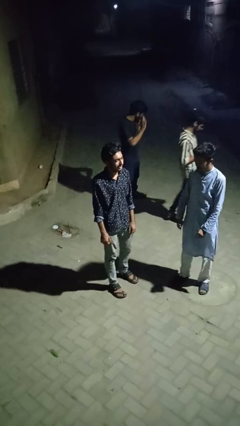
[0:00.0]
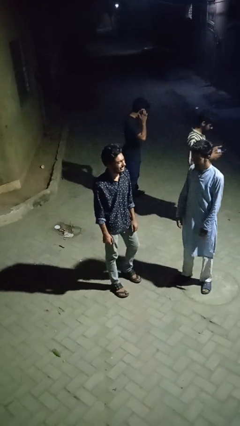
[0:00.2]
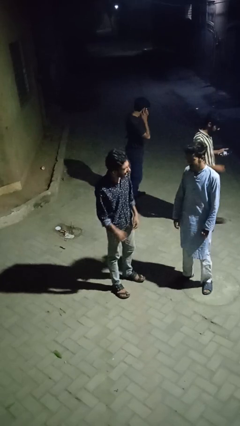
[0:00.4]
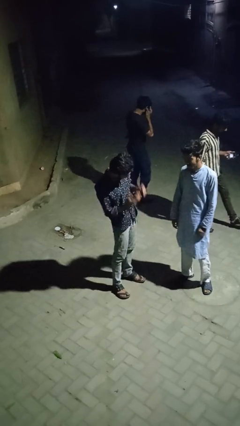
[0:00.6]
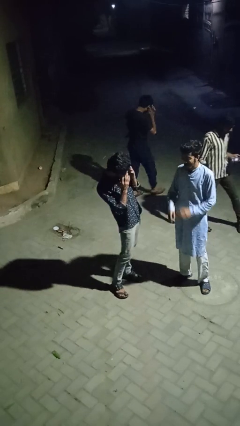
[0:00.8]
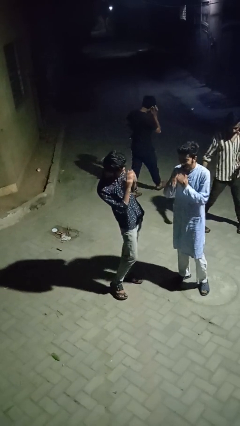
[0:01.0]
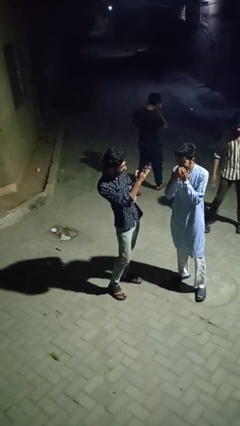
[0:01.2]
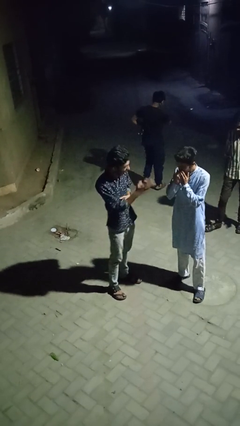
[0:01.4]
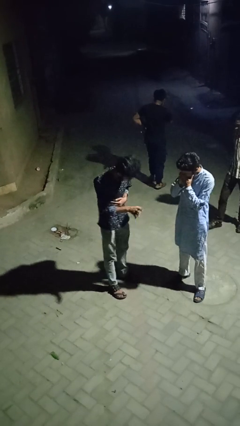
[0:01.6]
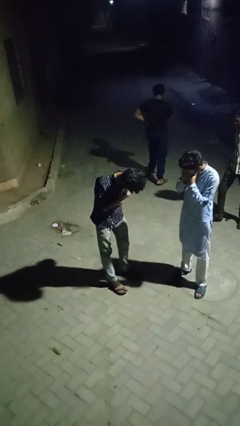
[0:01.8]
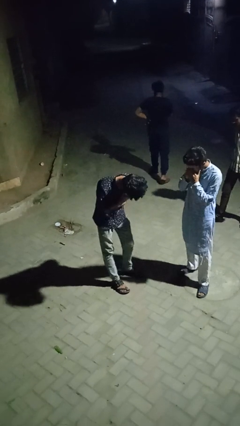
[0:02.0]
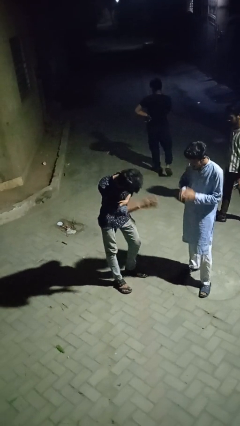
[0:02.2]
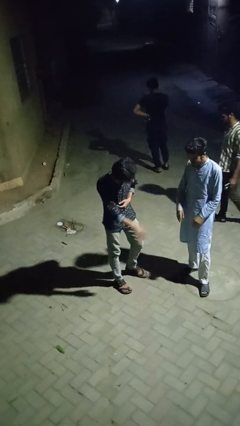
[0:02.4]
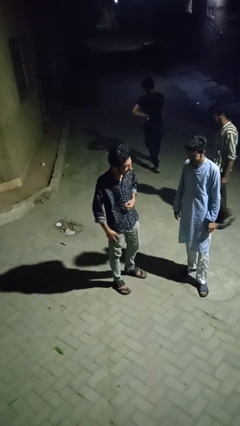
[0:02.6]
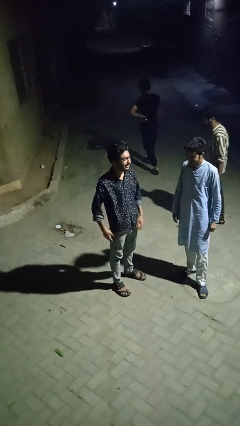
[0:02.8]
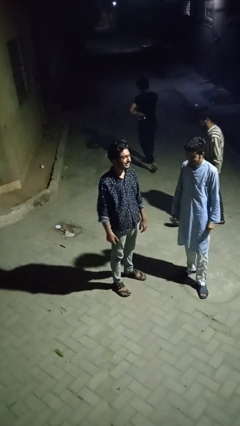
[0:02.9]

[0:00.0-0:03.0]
person laughs with person

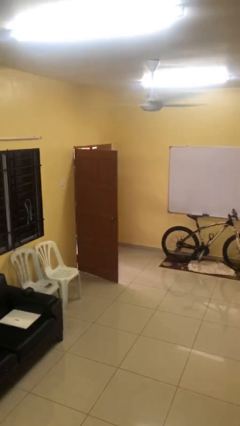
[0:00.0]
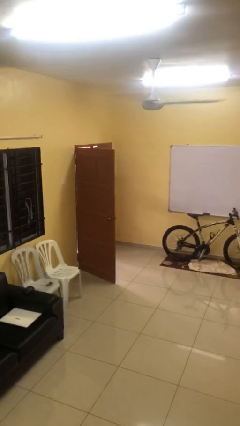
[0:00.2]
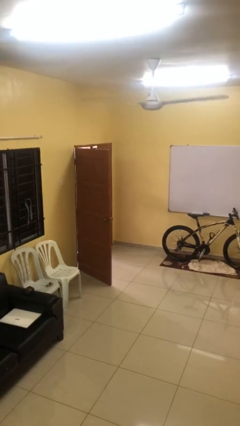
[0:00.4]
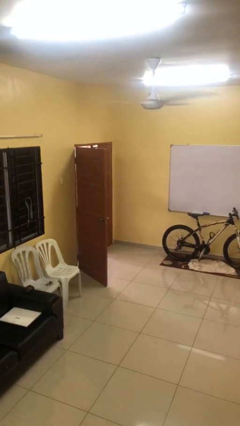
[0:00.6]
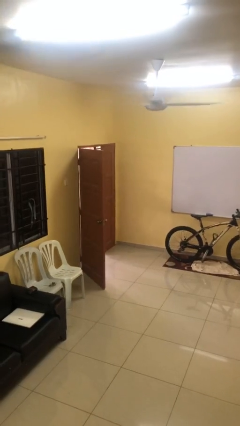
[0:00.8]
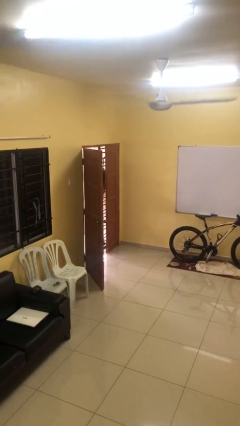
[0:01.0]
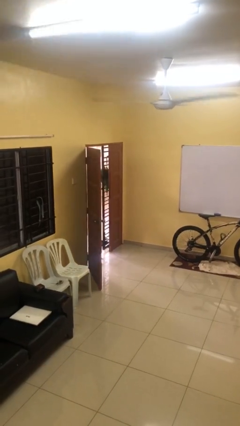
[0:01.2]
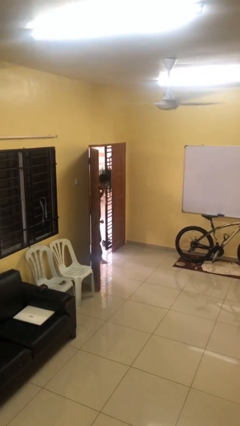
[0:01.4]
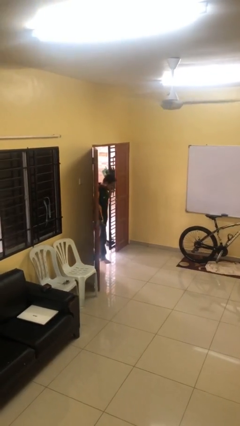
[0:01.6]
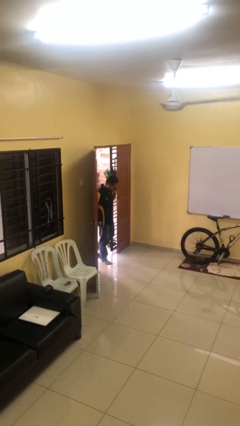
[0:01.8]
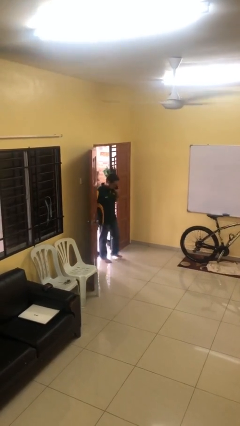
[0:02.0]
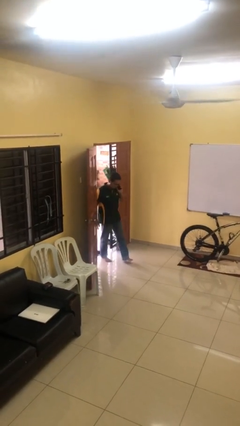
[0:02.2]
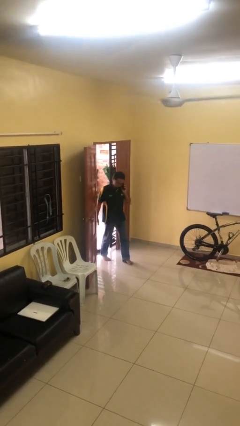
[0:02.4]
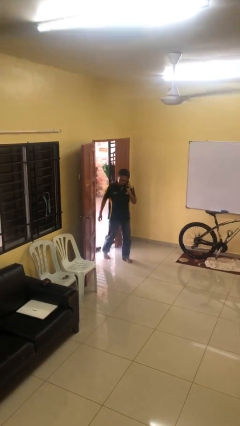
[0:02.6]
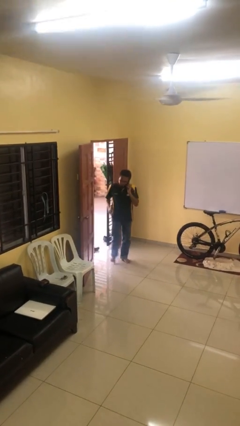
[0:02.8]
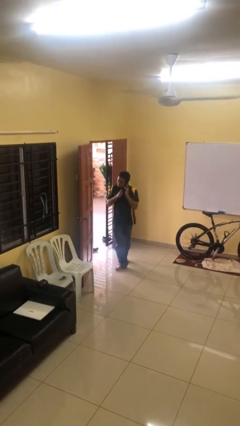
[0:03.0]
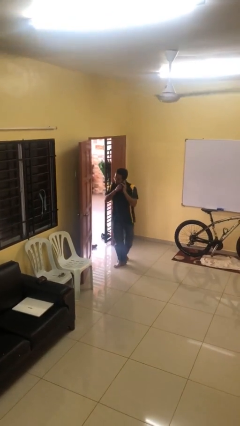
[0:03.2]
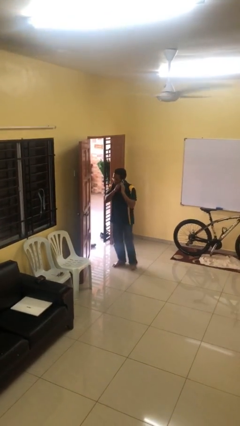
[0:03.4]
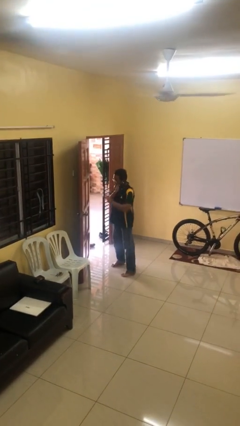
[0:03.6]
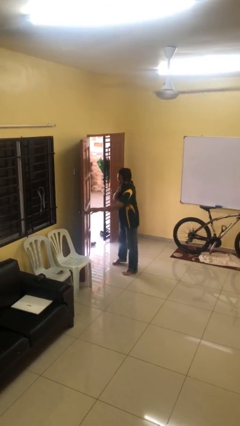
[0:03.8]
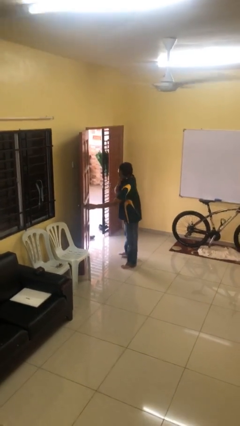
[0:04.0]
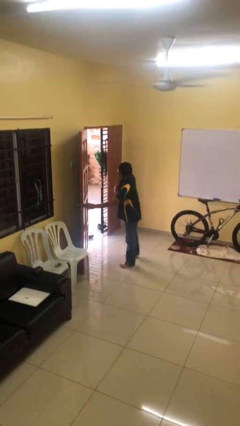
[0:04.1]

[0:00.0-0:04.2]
person enters scene through structure

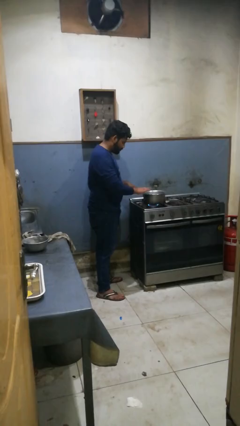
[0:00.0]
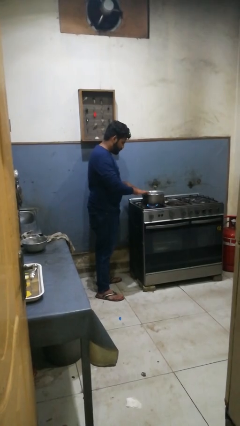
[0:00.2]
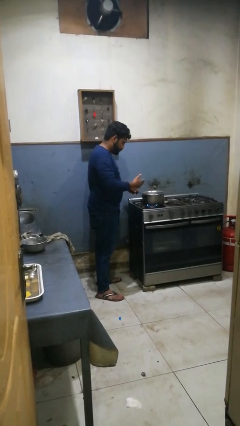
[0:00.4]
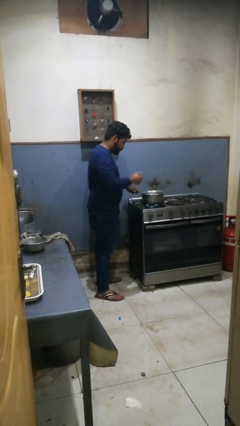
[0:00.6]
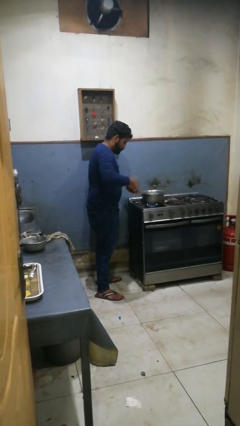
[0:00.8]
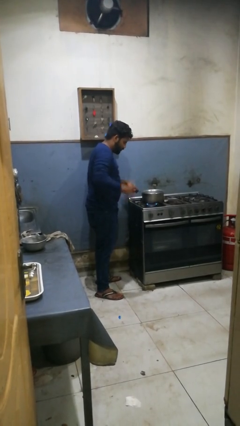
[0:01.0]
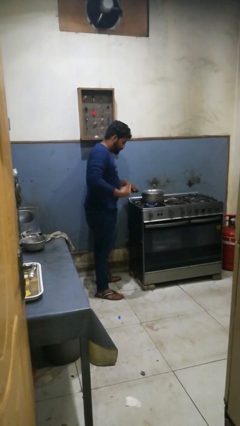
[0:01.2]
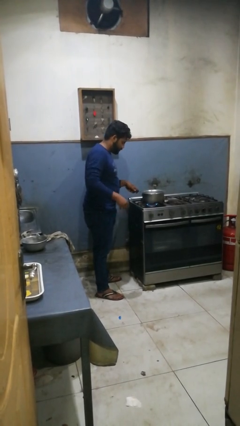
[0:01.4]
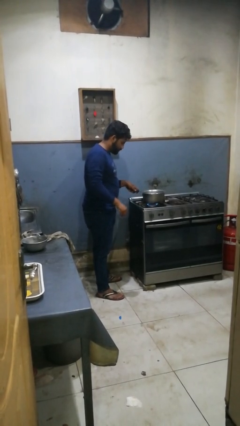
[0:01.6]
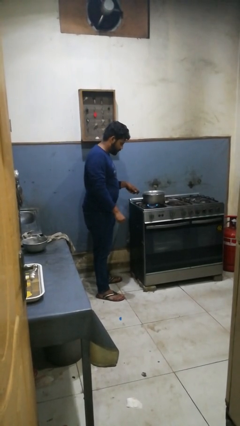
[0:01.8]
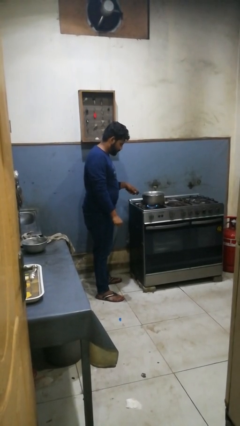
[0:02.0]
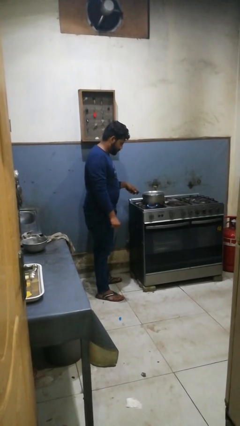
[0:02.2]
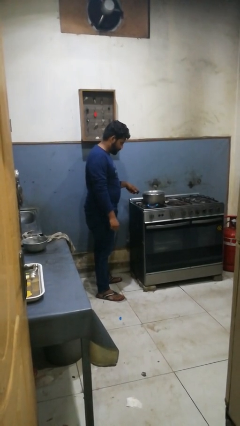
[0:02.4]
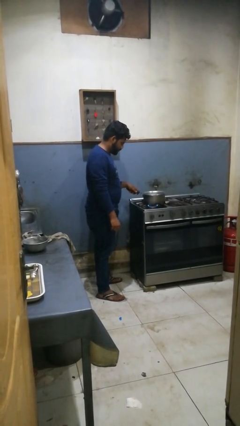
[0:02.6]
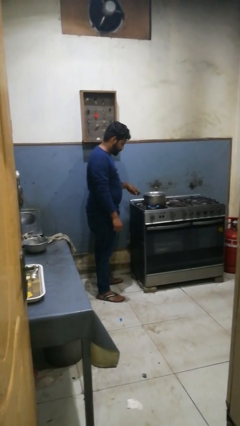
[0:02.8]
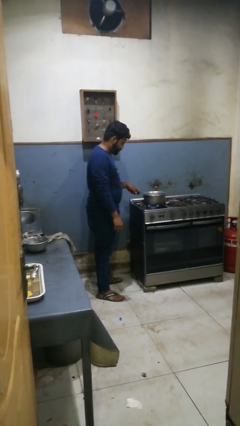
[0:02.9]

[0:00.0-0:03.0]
person burns hand

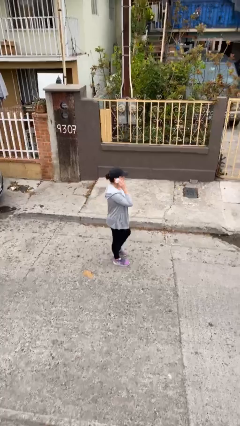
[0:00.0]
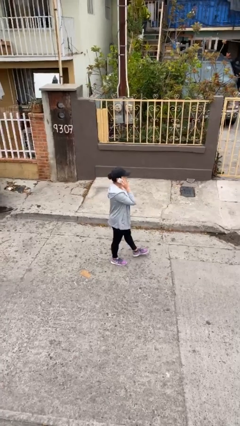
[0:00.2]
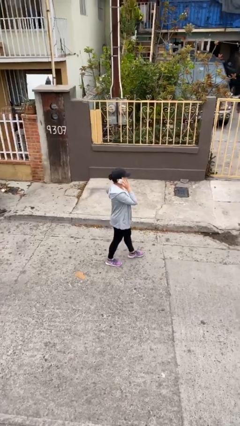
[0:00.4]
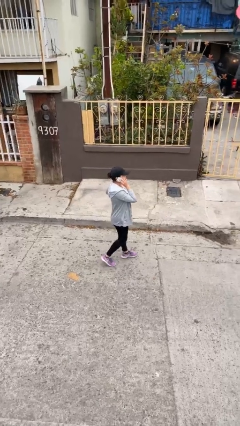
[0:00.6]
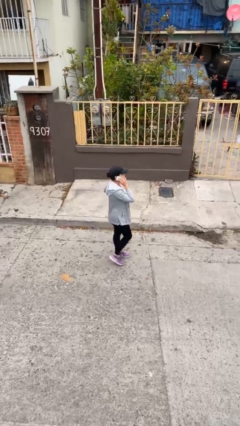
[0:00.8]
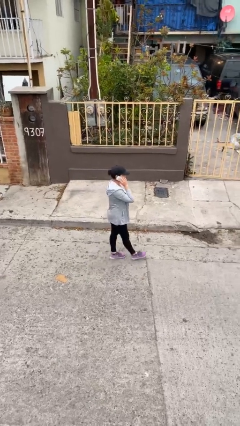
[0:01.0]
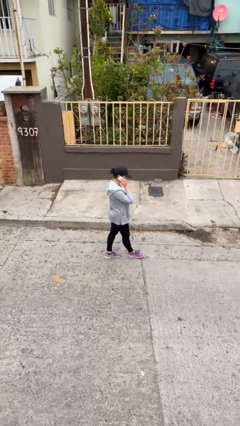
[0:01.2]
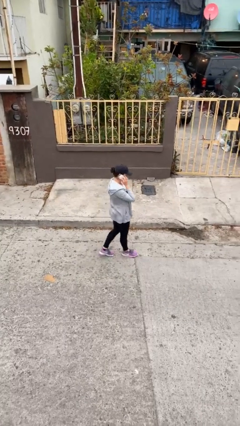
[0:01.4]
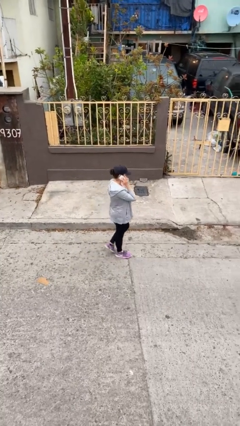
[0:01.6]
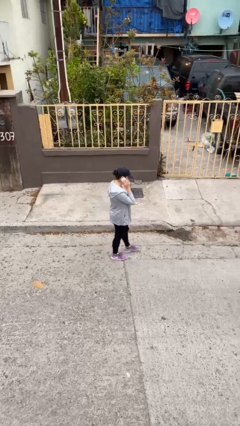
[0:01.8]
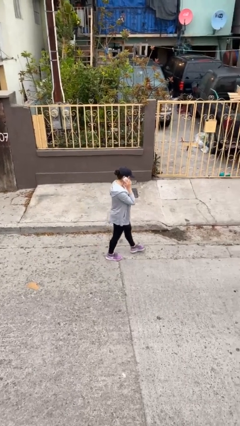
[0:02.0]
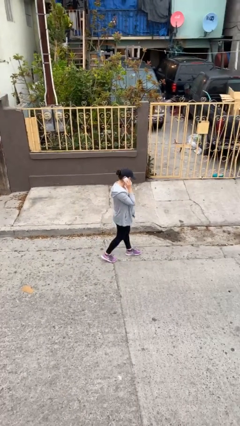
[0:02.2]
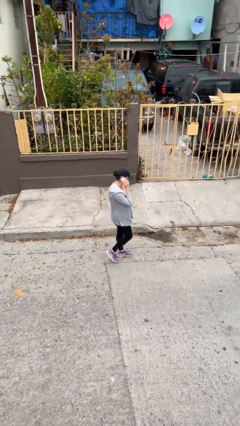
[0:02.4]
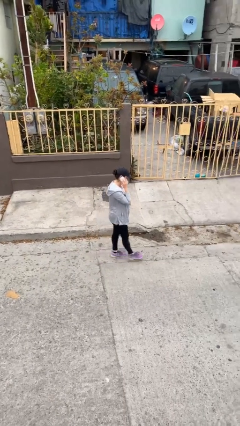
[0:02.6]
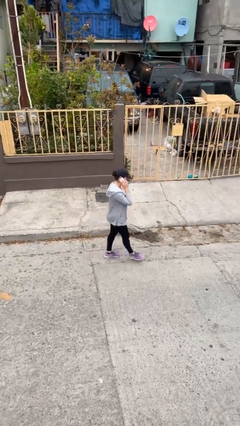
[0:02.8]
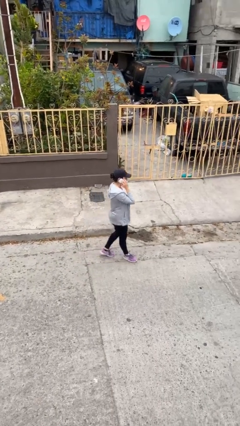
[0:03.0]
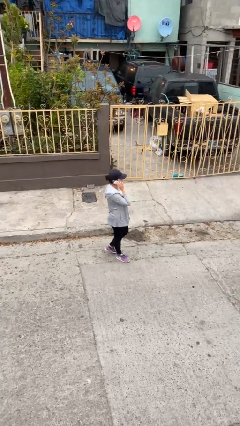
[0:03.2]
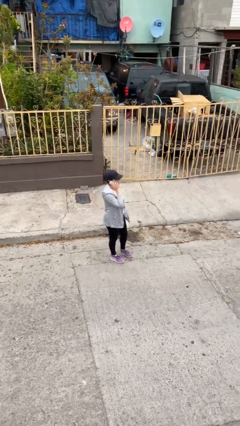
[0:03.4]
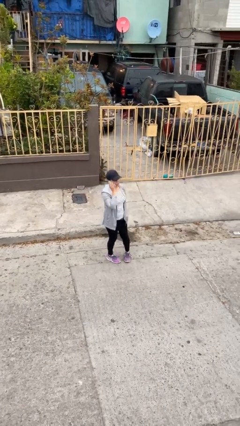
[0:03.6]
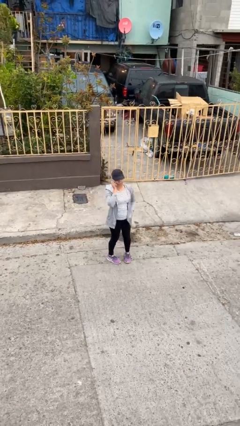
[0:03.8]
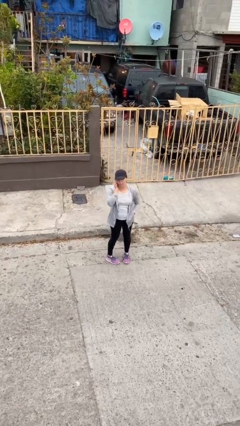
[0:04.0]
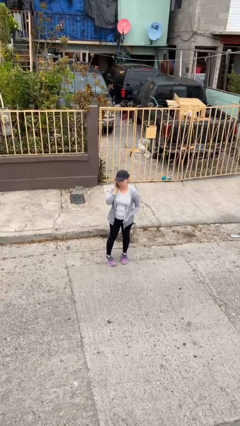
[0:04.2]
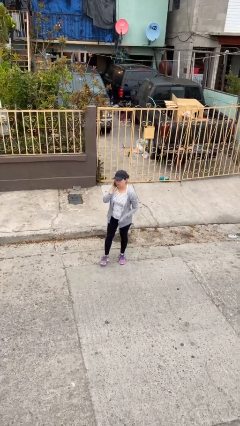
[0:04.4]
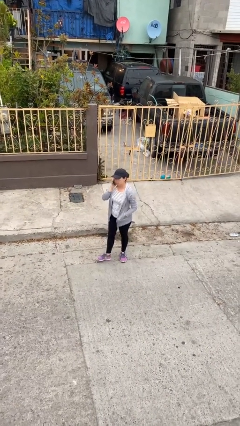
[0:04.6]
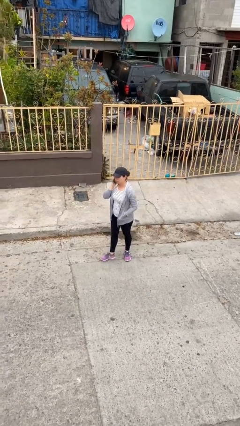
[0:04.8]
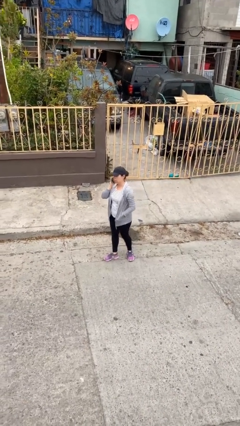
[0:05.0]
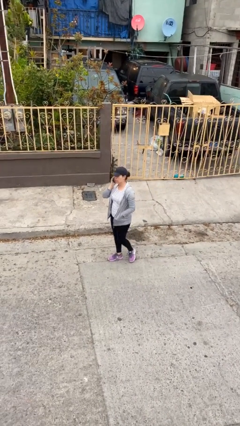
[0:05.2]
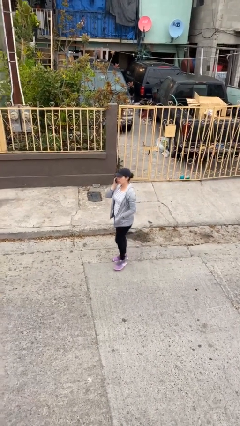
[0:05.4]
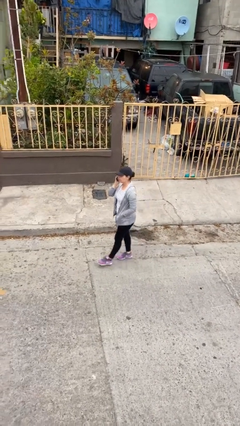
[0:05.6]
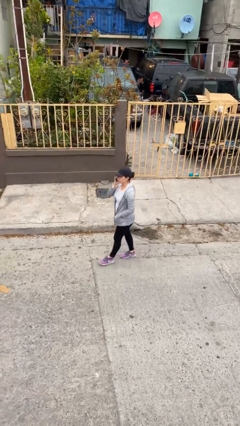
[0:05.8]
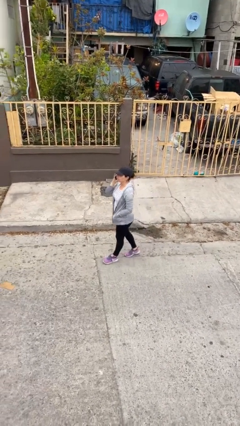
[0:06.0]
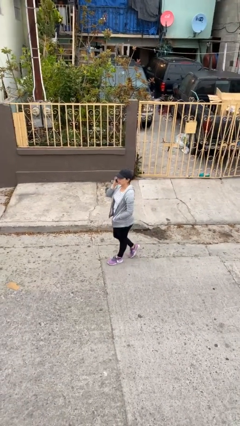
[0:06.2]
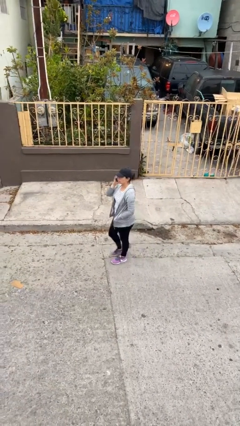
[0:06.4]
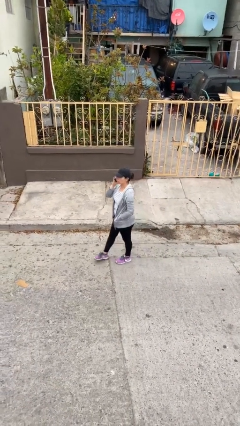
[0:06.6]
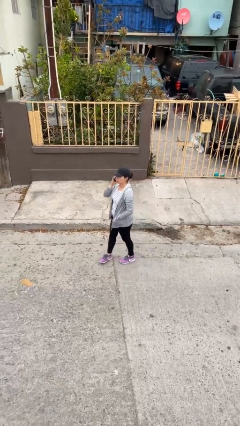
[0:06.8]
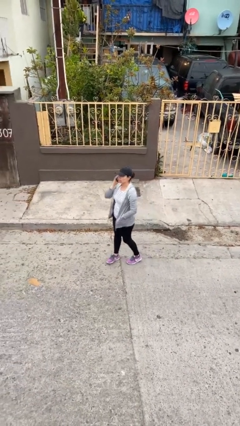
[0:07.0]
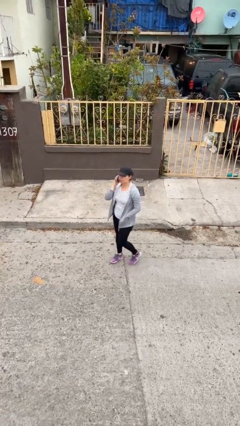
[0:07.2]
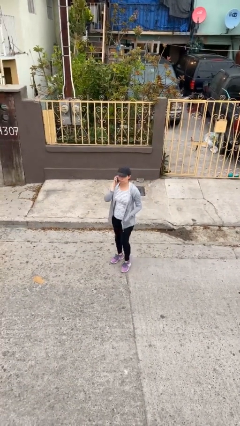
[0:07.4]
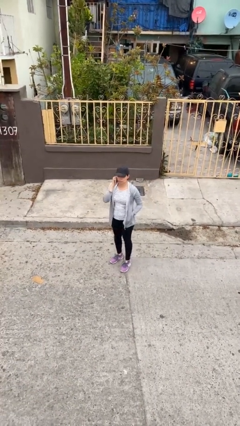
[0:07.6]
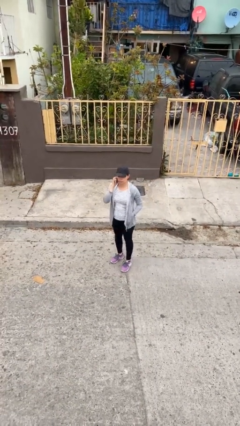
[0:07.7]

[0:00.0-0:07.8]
person talks on phone

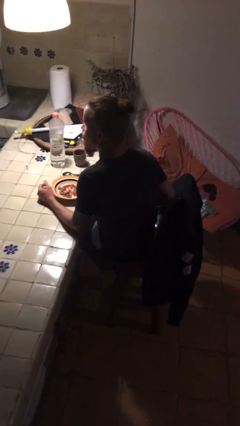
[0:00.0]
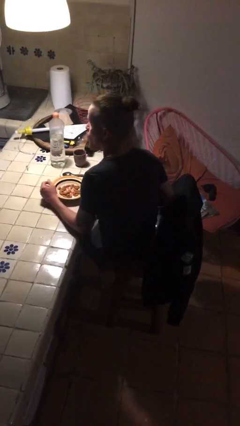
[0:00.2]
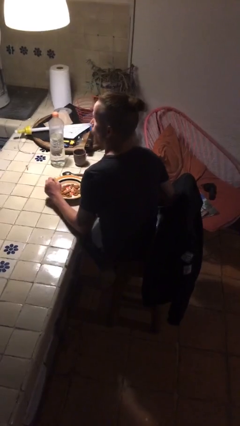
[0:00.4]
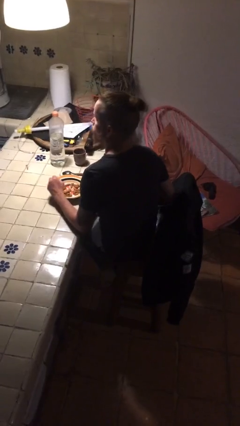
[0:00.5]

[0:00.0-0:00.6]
person eats with hands
